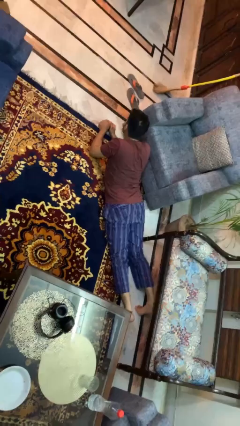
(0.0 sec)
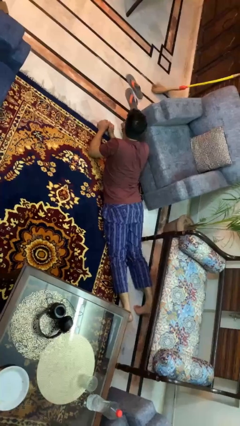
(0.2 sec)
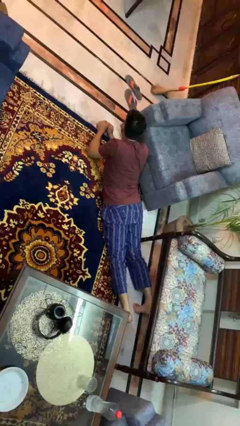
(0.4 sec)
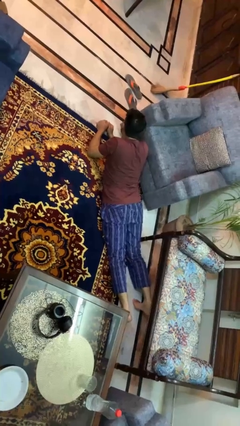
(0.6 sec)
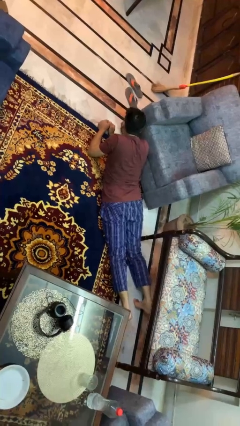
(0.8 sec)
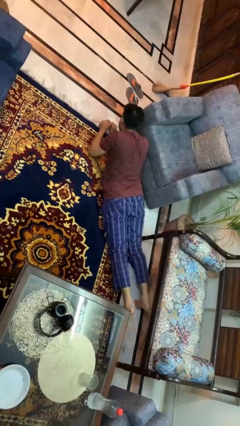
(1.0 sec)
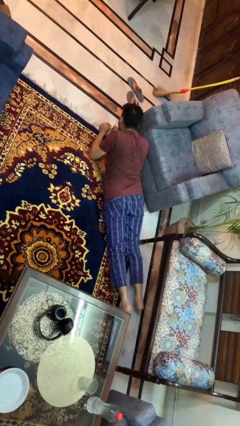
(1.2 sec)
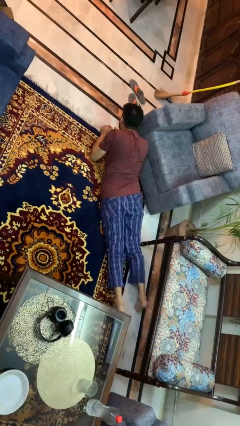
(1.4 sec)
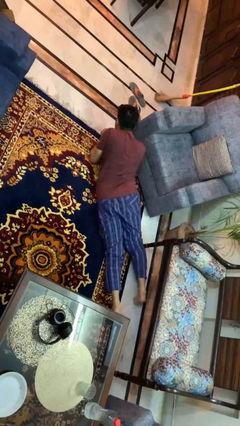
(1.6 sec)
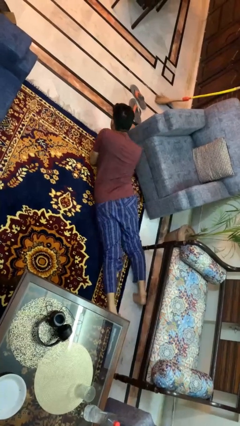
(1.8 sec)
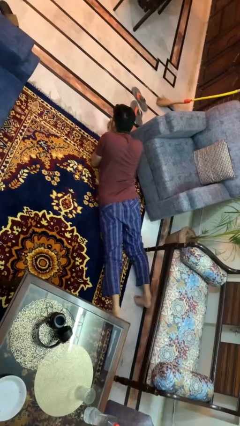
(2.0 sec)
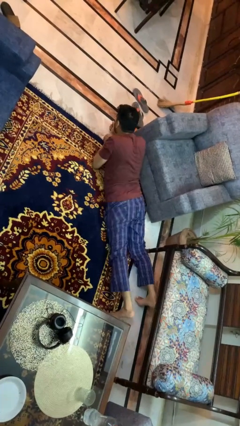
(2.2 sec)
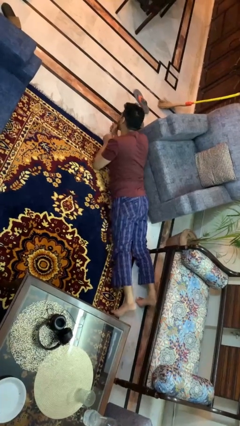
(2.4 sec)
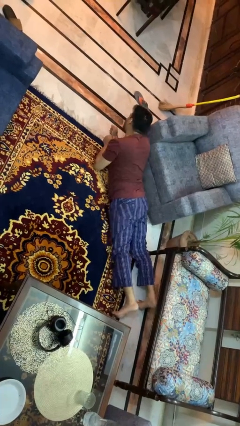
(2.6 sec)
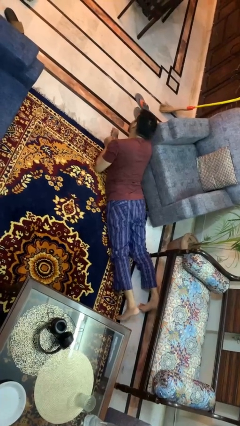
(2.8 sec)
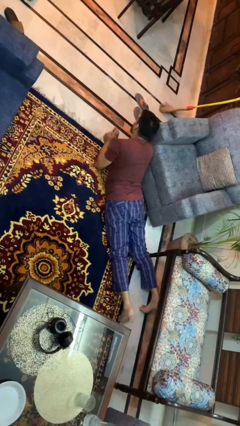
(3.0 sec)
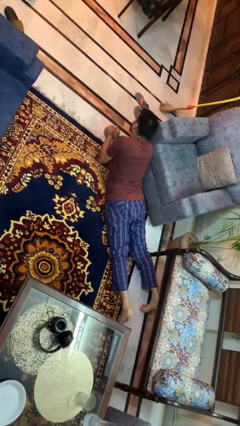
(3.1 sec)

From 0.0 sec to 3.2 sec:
person crawls

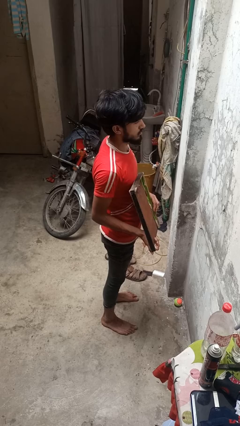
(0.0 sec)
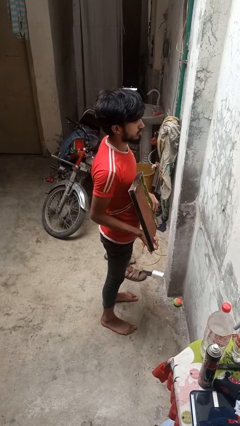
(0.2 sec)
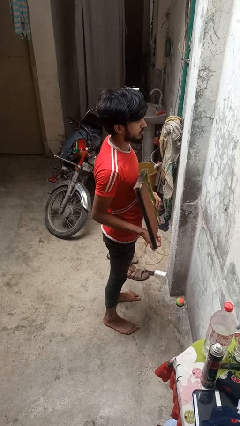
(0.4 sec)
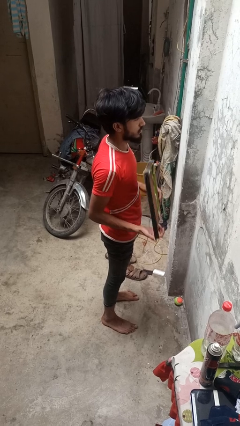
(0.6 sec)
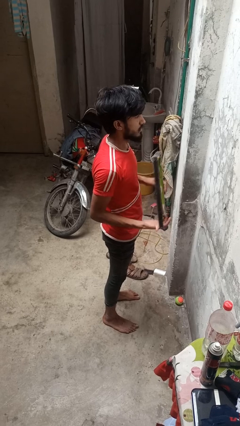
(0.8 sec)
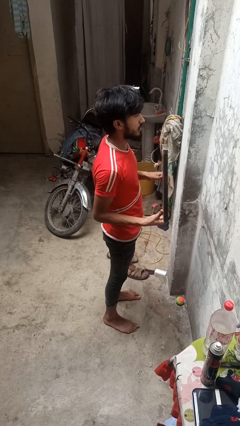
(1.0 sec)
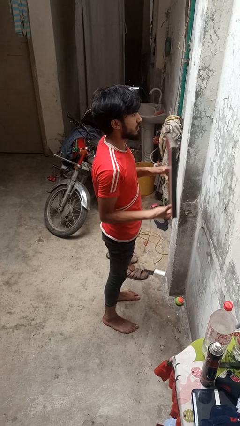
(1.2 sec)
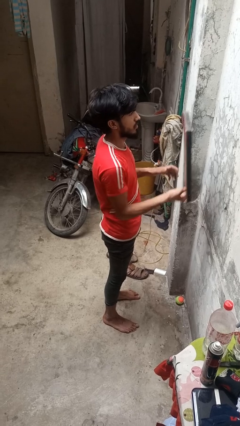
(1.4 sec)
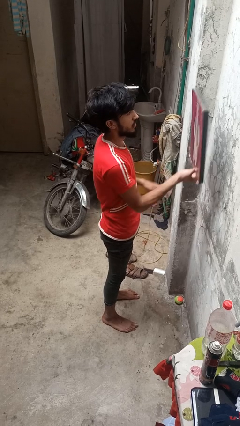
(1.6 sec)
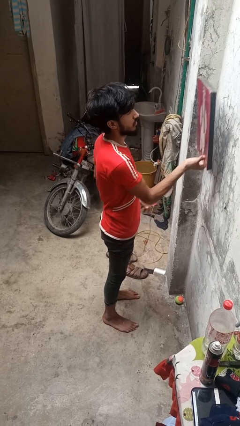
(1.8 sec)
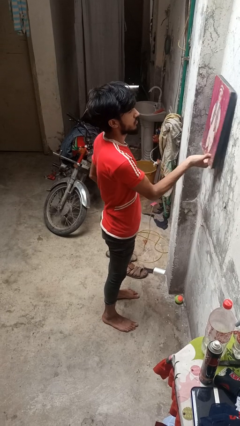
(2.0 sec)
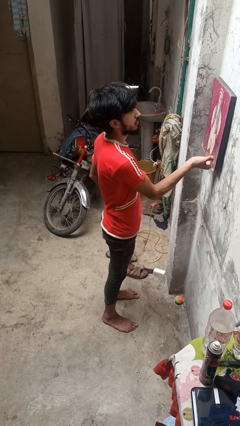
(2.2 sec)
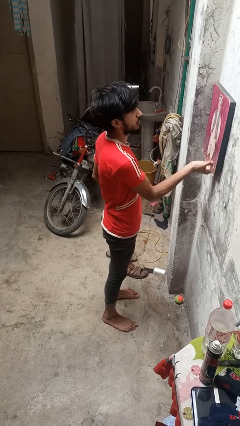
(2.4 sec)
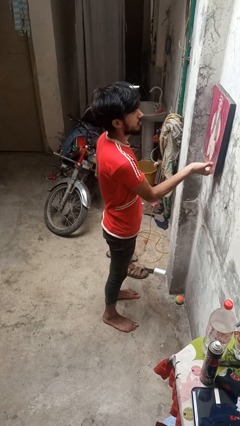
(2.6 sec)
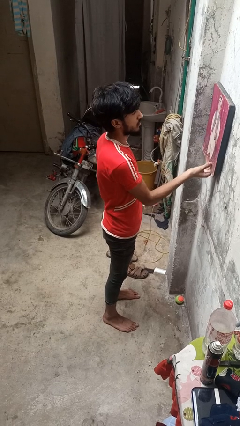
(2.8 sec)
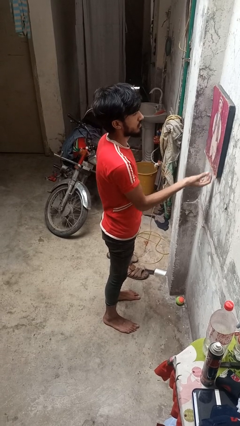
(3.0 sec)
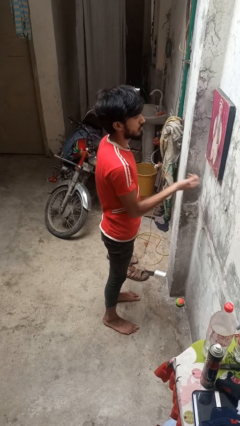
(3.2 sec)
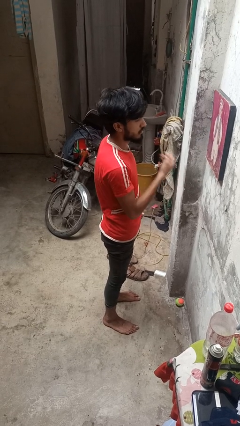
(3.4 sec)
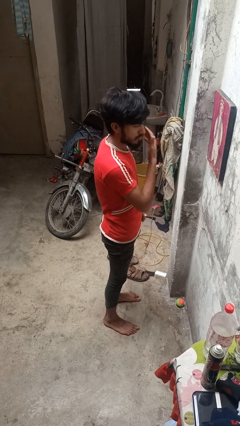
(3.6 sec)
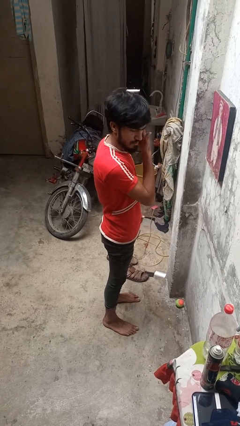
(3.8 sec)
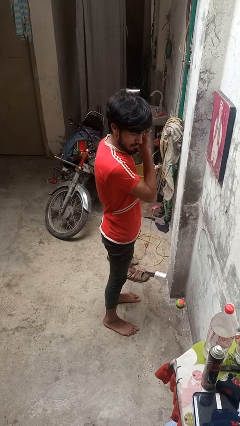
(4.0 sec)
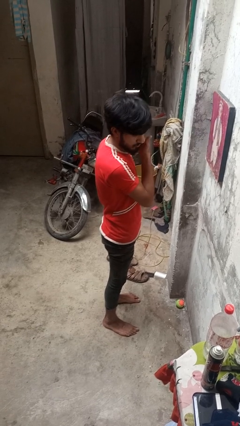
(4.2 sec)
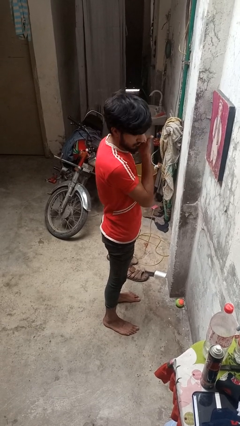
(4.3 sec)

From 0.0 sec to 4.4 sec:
person puts up picture frame

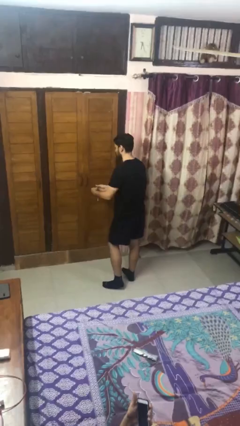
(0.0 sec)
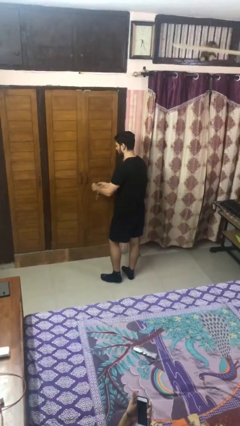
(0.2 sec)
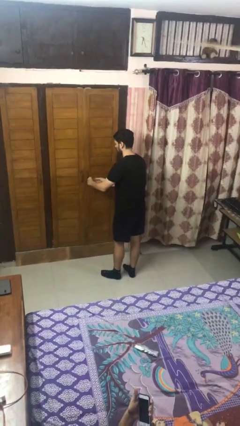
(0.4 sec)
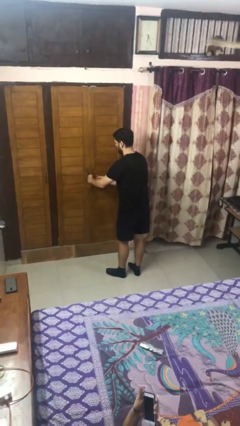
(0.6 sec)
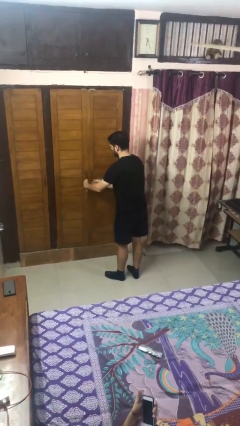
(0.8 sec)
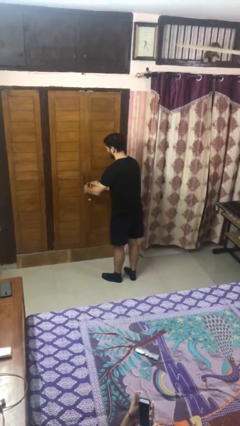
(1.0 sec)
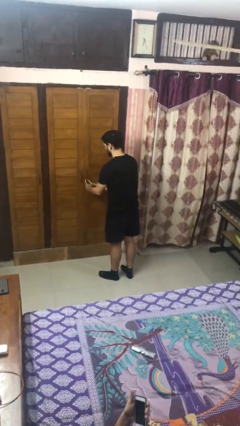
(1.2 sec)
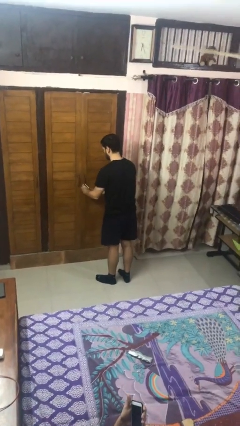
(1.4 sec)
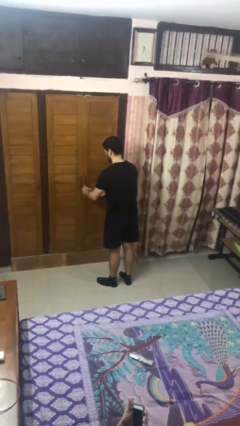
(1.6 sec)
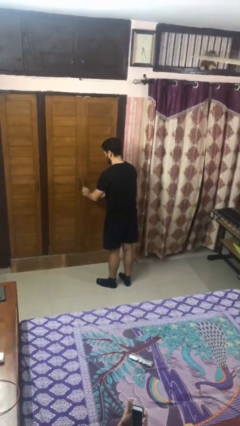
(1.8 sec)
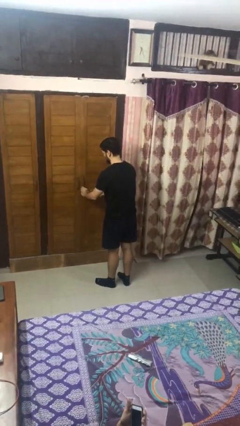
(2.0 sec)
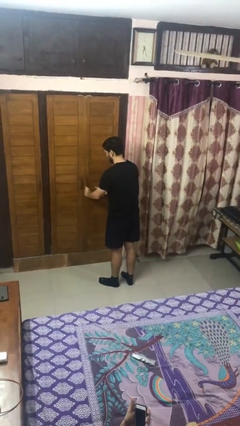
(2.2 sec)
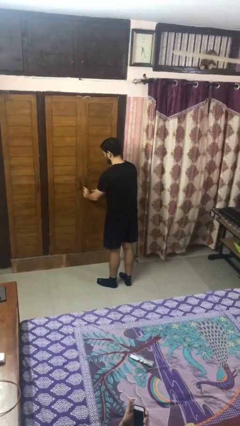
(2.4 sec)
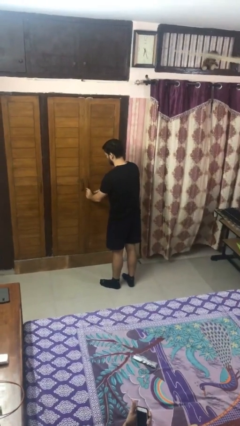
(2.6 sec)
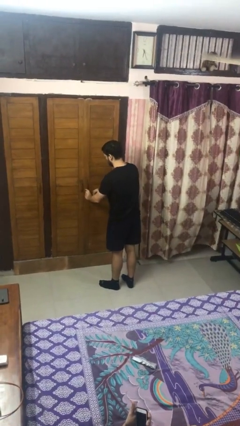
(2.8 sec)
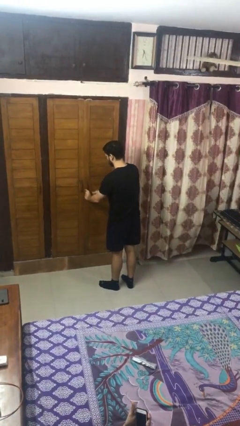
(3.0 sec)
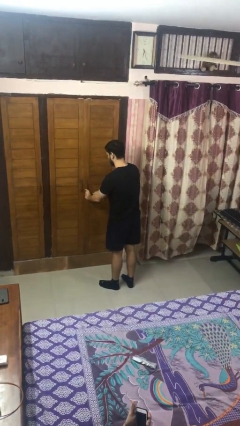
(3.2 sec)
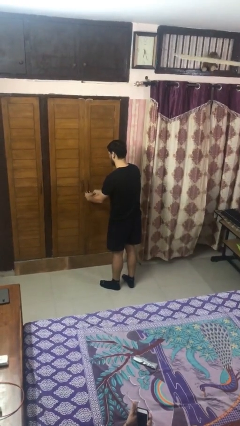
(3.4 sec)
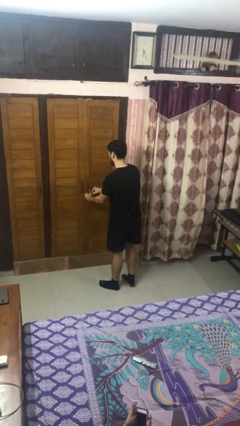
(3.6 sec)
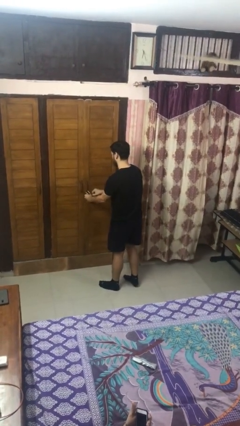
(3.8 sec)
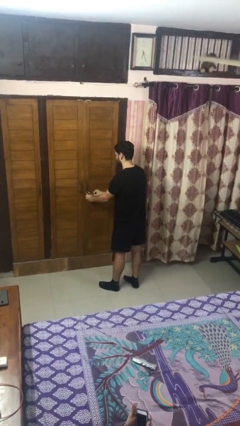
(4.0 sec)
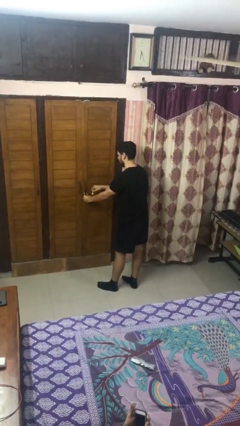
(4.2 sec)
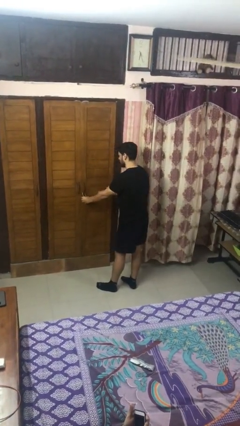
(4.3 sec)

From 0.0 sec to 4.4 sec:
person locks door with keys

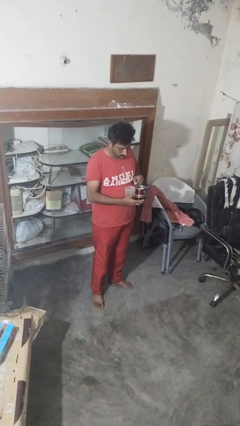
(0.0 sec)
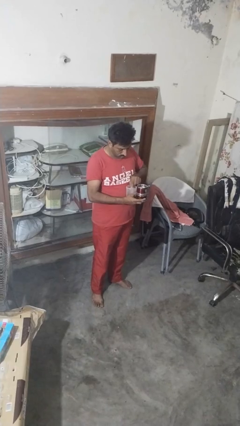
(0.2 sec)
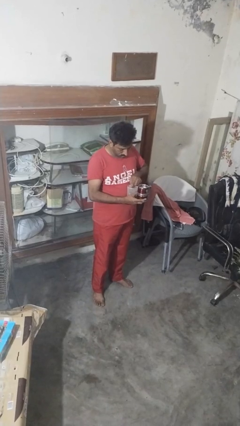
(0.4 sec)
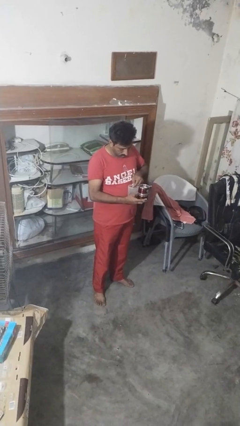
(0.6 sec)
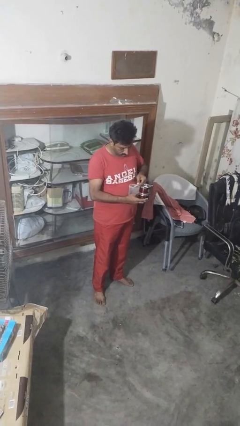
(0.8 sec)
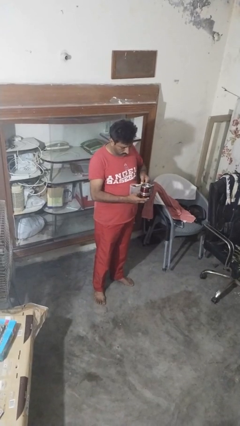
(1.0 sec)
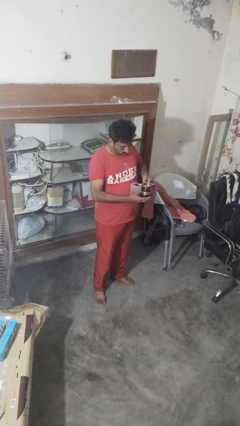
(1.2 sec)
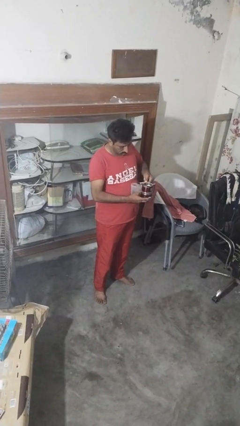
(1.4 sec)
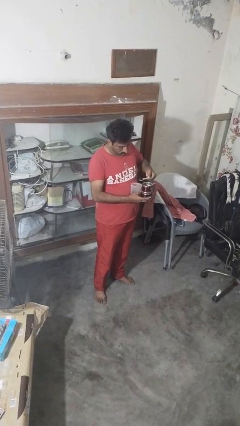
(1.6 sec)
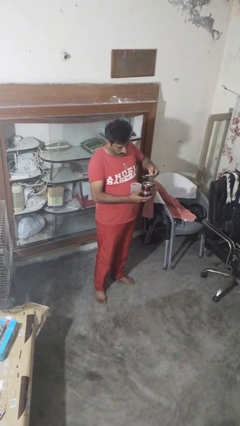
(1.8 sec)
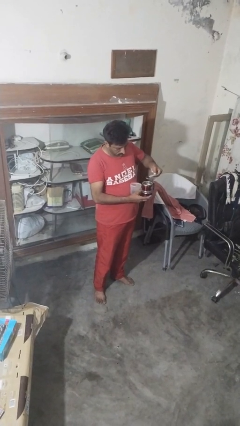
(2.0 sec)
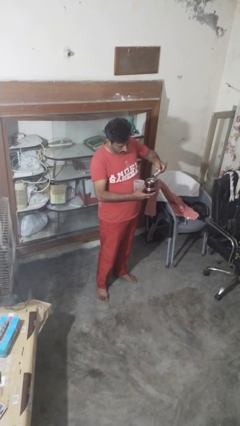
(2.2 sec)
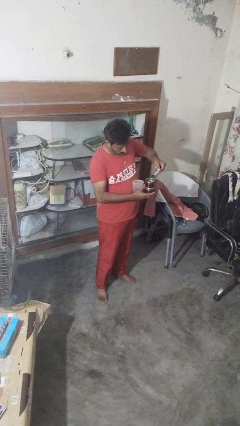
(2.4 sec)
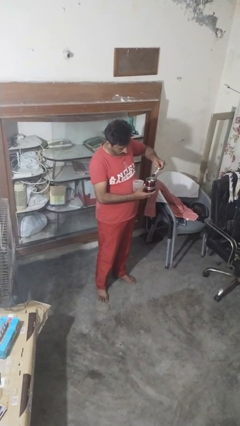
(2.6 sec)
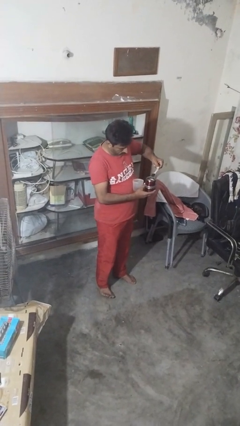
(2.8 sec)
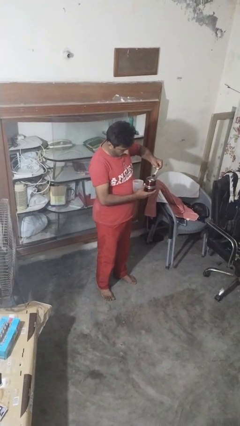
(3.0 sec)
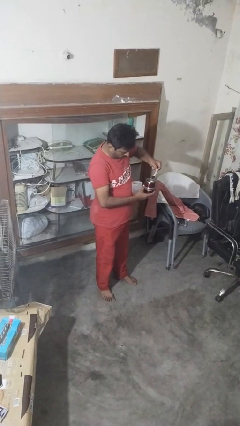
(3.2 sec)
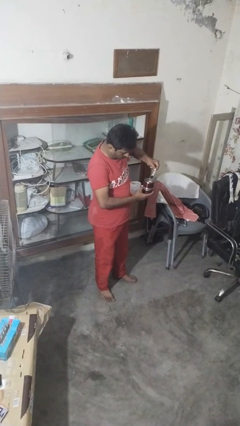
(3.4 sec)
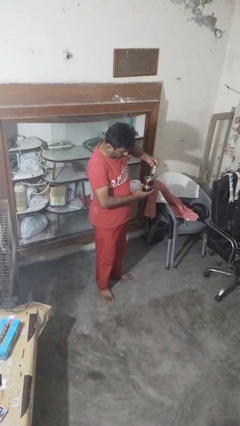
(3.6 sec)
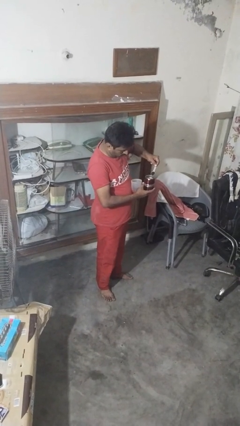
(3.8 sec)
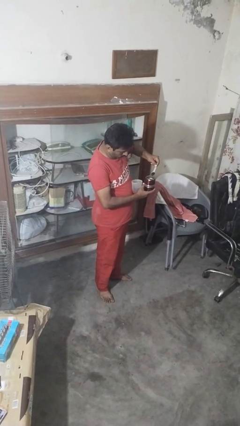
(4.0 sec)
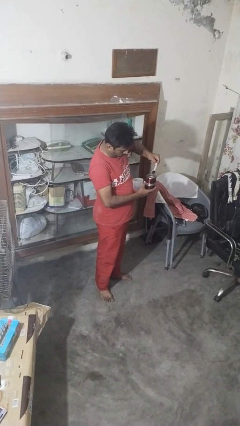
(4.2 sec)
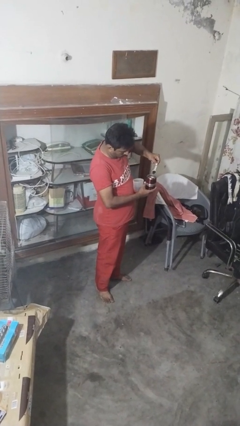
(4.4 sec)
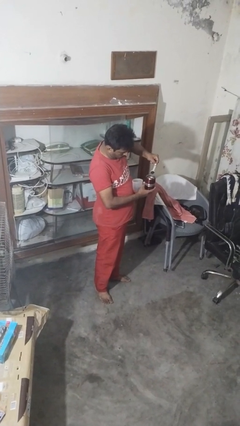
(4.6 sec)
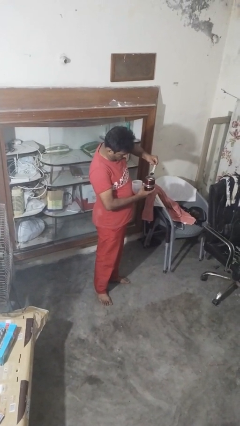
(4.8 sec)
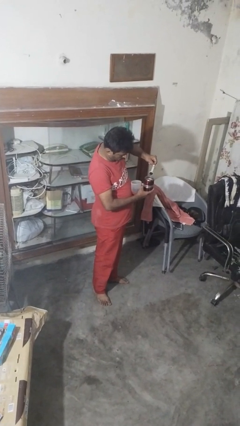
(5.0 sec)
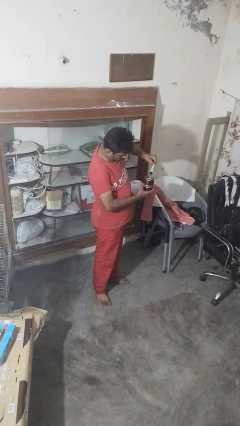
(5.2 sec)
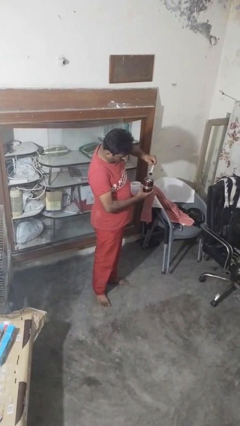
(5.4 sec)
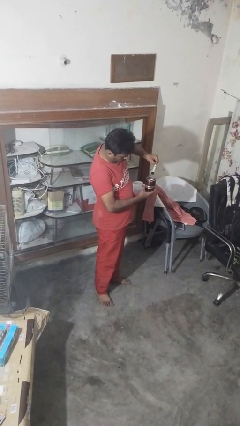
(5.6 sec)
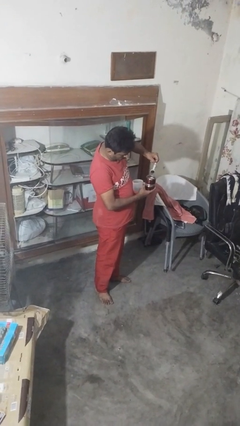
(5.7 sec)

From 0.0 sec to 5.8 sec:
person pours coffee into mug
